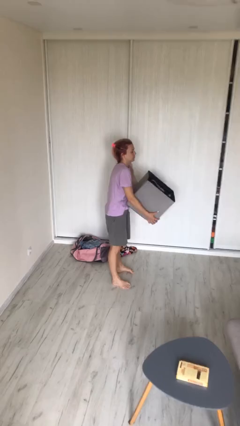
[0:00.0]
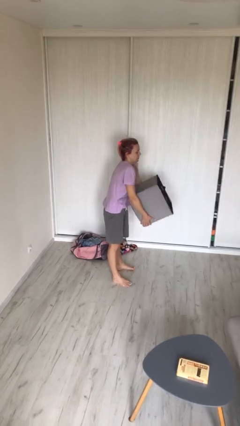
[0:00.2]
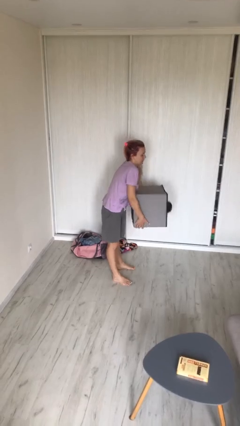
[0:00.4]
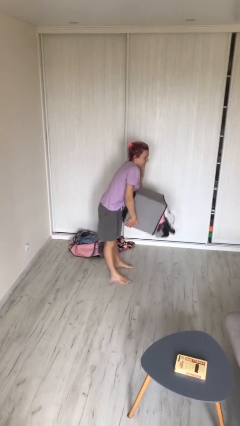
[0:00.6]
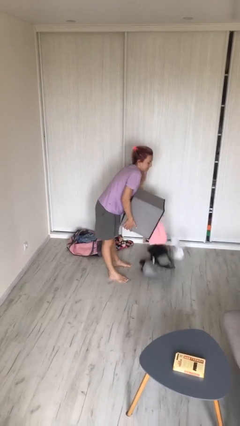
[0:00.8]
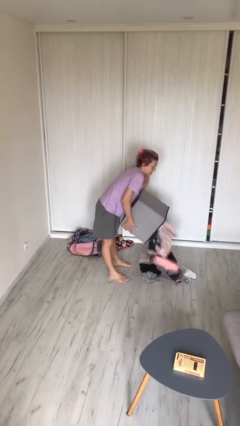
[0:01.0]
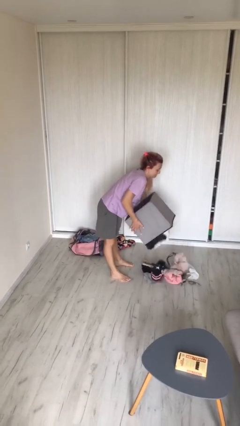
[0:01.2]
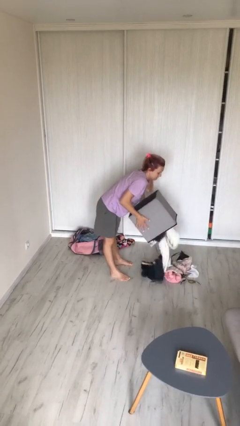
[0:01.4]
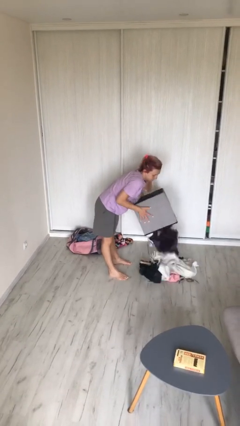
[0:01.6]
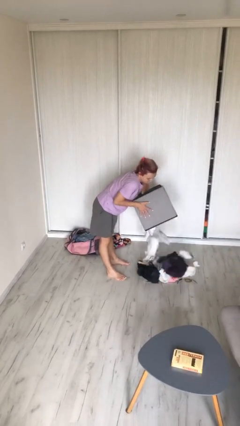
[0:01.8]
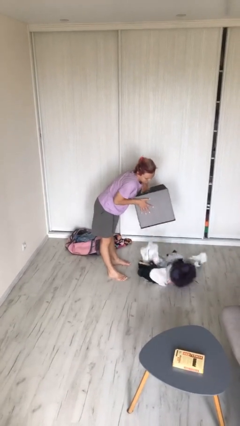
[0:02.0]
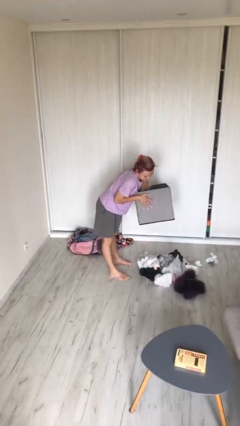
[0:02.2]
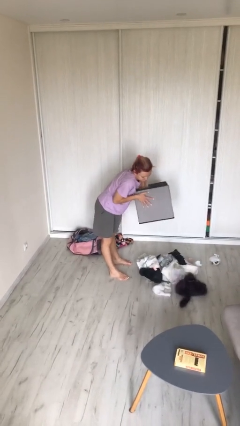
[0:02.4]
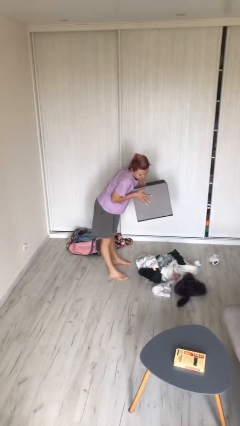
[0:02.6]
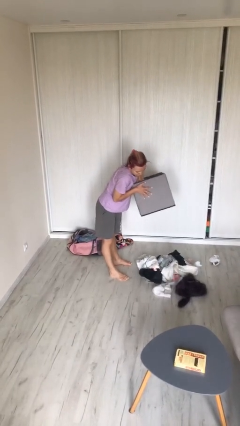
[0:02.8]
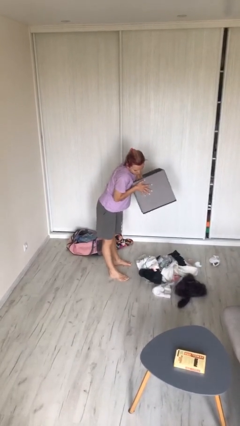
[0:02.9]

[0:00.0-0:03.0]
person unloads box onto floor

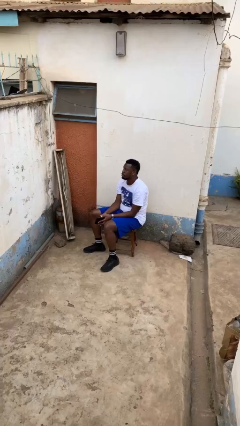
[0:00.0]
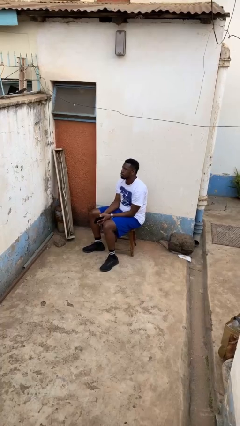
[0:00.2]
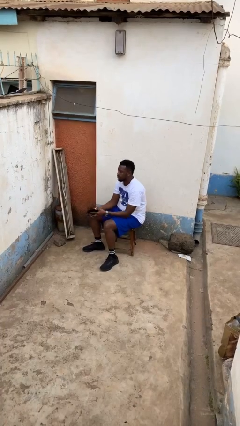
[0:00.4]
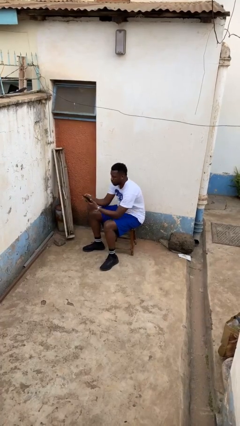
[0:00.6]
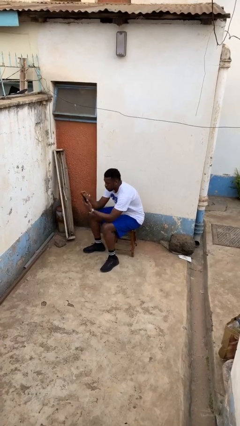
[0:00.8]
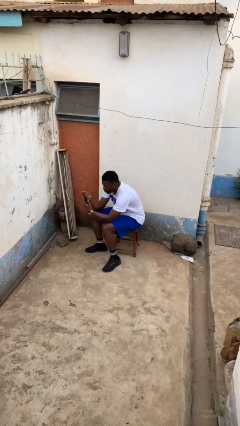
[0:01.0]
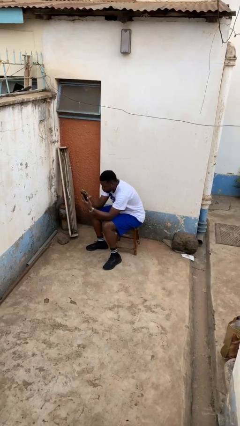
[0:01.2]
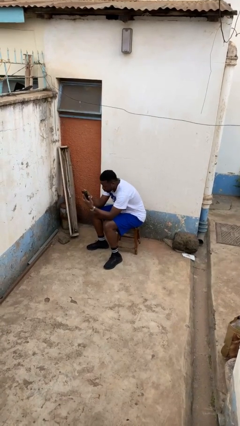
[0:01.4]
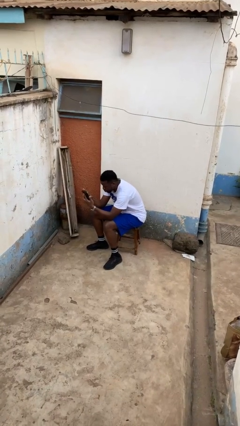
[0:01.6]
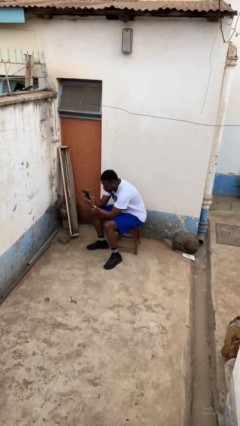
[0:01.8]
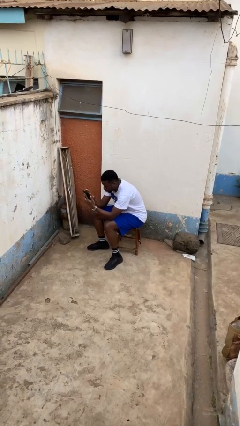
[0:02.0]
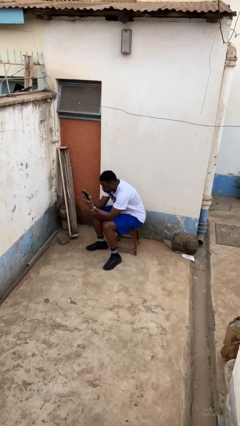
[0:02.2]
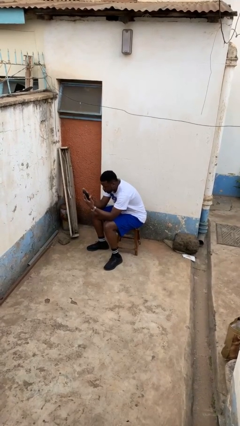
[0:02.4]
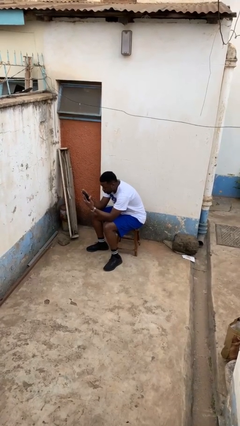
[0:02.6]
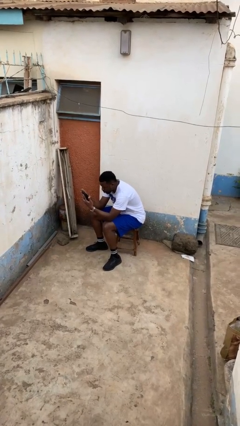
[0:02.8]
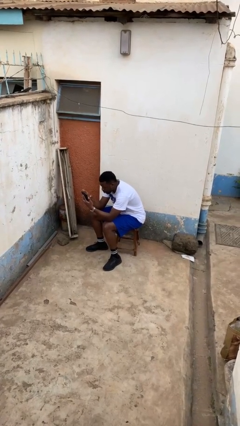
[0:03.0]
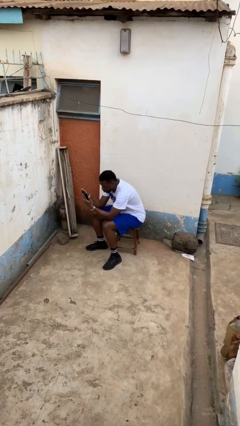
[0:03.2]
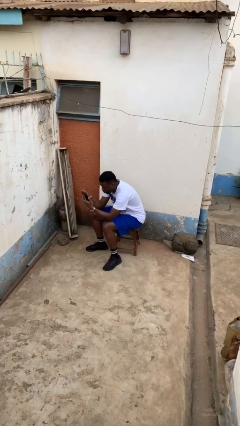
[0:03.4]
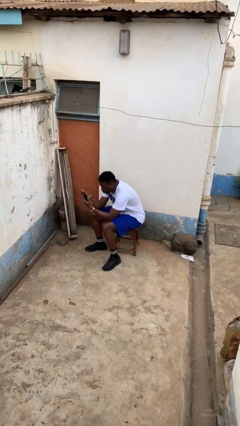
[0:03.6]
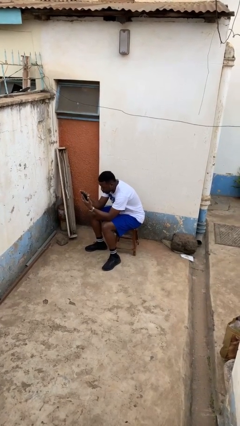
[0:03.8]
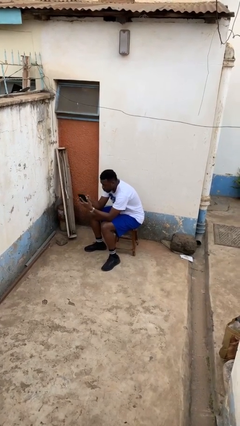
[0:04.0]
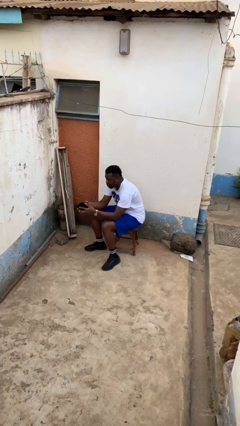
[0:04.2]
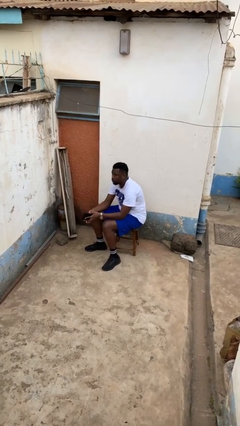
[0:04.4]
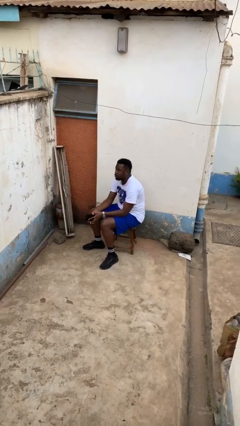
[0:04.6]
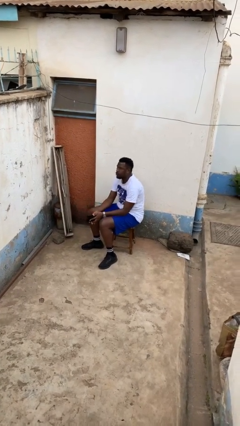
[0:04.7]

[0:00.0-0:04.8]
person interacts with tablet

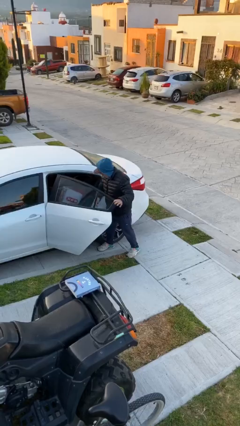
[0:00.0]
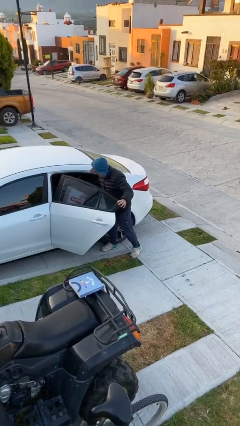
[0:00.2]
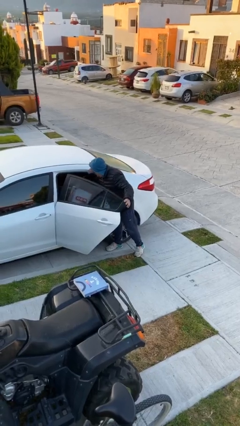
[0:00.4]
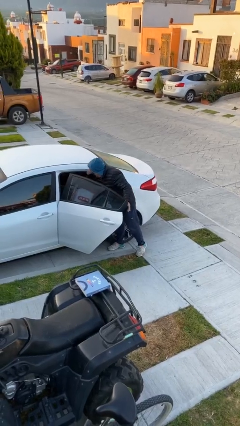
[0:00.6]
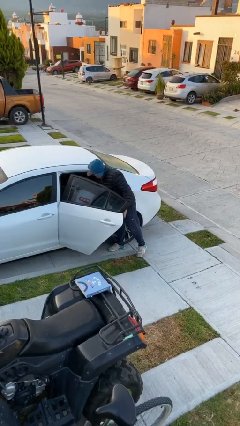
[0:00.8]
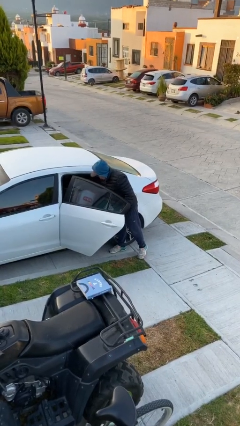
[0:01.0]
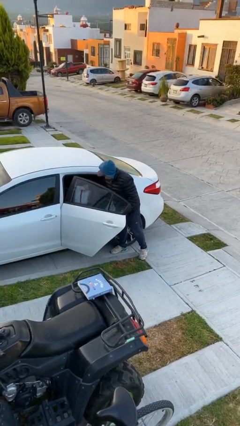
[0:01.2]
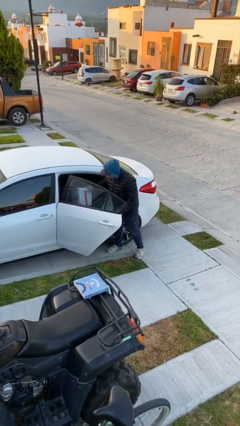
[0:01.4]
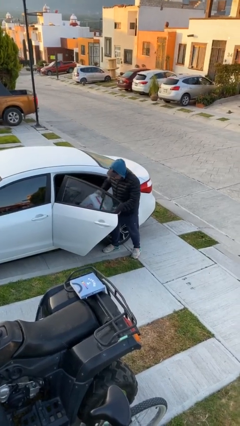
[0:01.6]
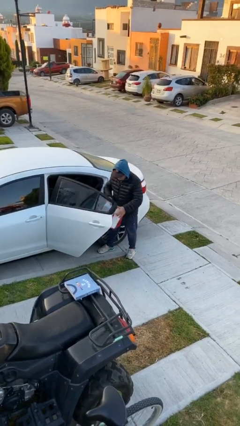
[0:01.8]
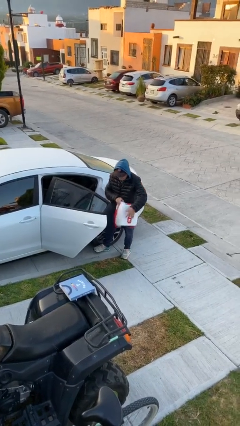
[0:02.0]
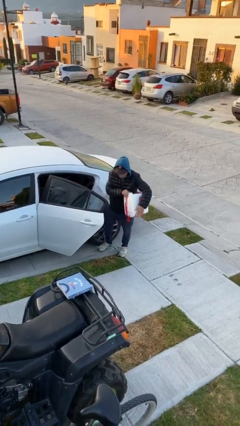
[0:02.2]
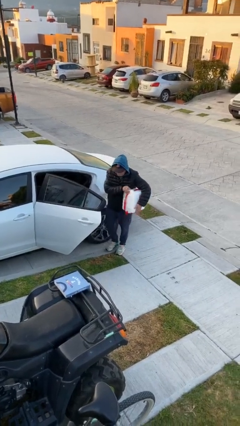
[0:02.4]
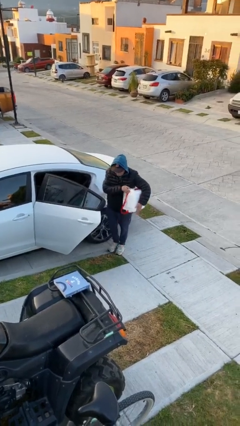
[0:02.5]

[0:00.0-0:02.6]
person unloads car

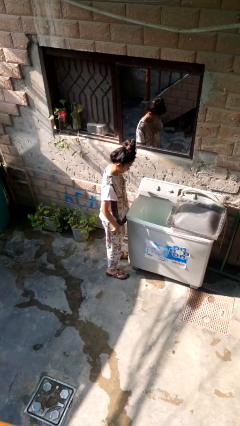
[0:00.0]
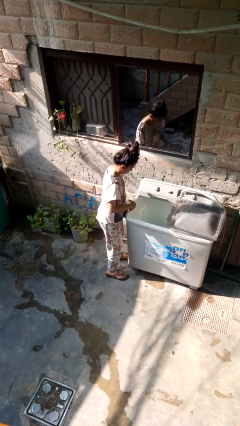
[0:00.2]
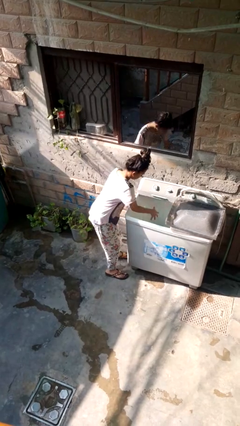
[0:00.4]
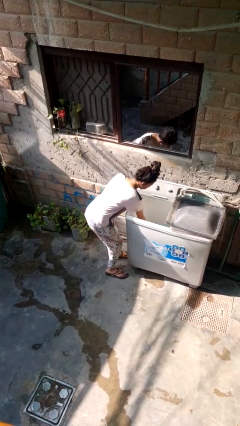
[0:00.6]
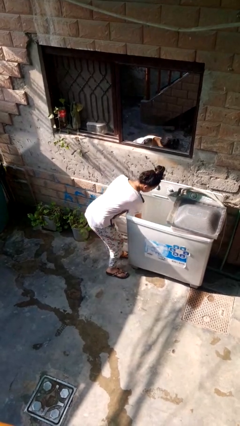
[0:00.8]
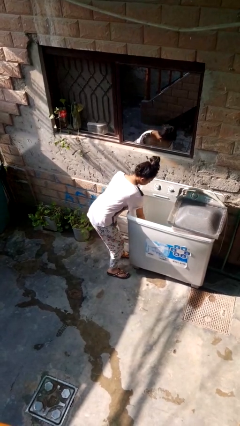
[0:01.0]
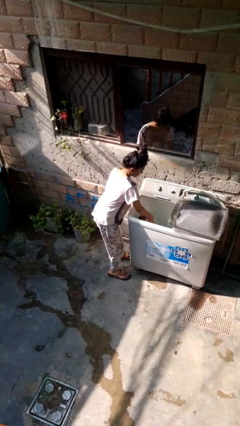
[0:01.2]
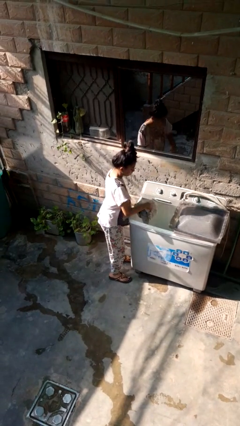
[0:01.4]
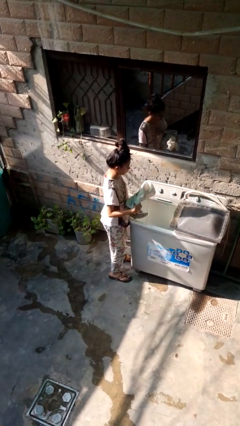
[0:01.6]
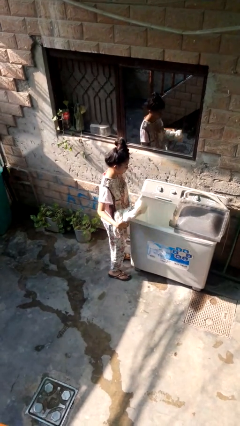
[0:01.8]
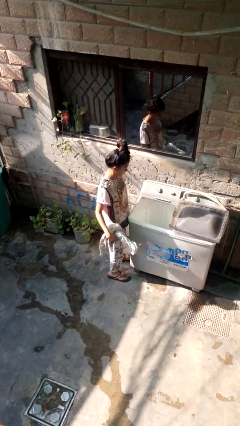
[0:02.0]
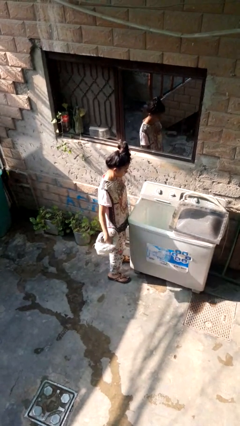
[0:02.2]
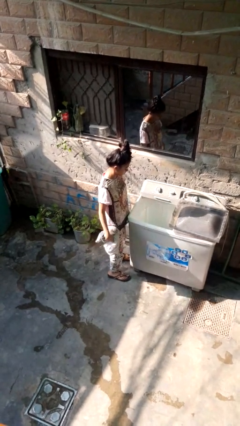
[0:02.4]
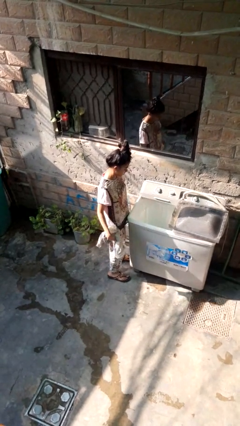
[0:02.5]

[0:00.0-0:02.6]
person unloads clotheswasher

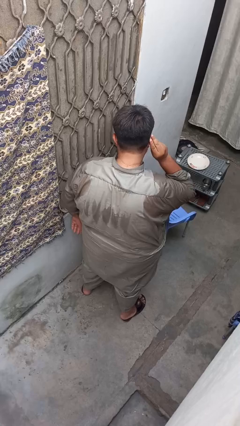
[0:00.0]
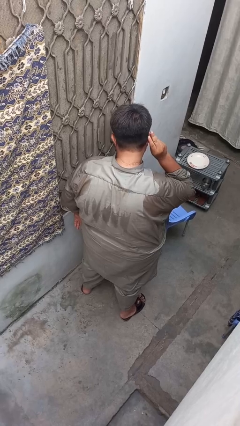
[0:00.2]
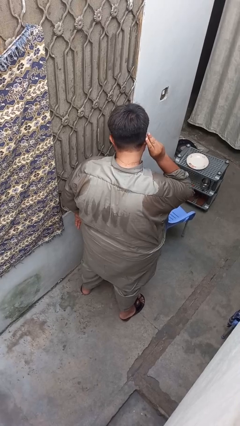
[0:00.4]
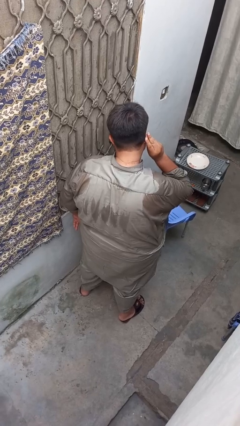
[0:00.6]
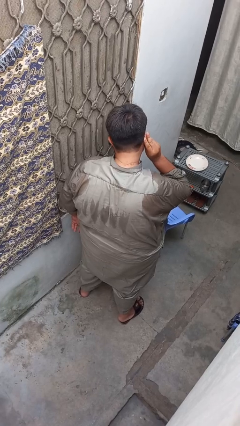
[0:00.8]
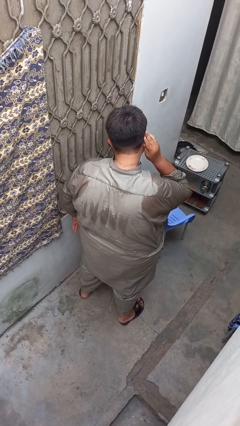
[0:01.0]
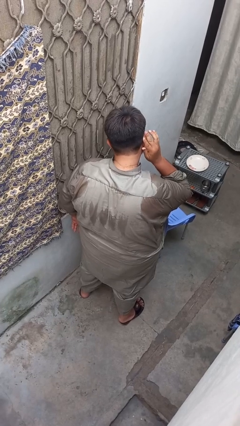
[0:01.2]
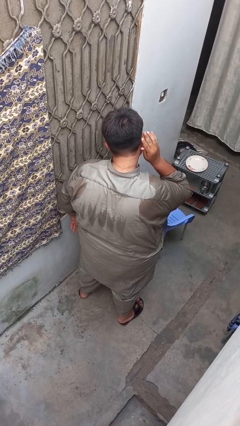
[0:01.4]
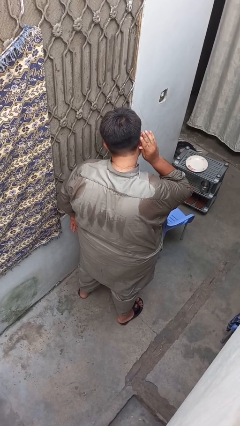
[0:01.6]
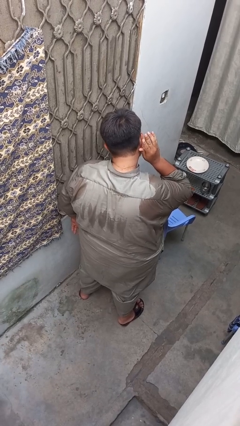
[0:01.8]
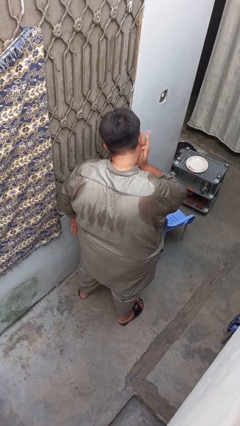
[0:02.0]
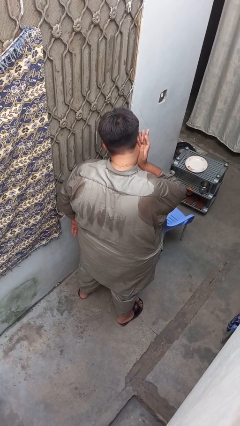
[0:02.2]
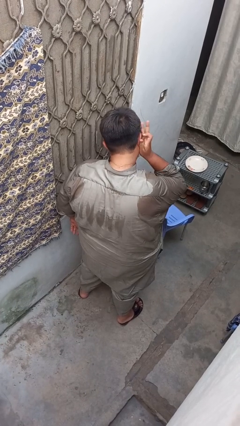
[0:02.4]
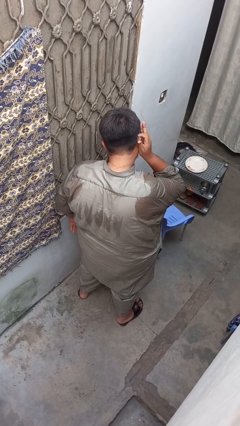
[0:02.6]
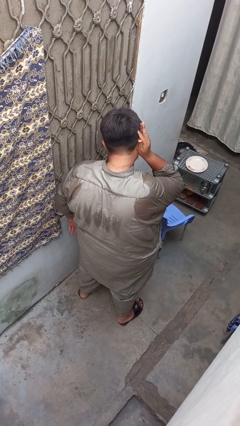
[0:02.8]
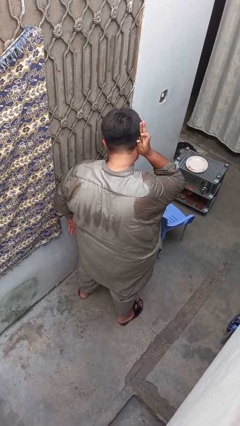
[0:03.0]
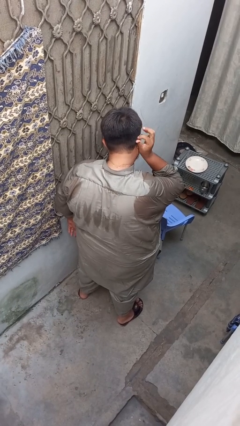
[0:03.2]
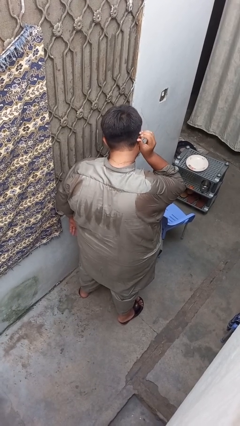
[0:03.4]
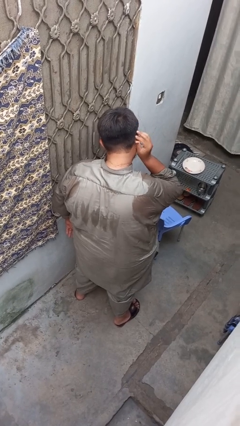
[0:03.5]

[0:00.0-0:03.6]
person puts on earrings

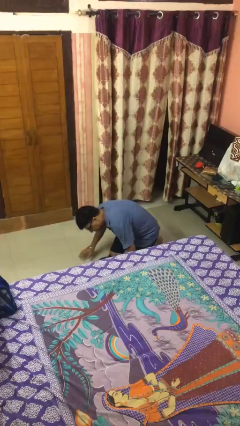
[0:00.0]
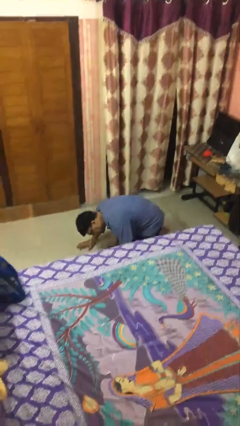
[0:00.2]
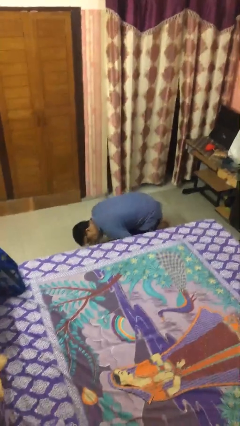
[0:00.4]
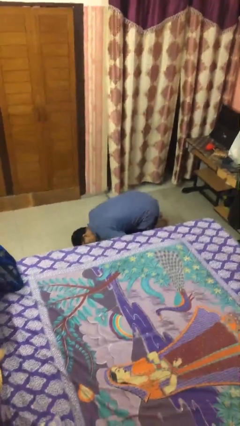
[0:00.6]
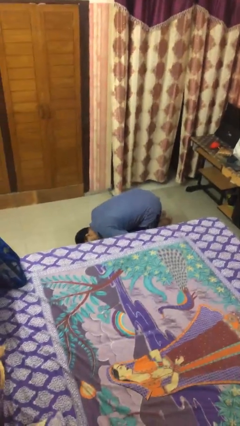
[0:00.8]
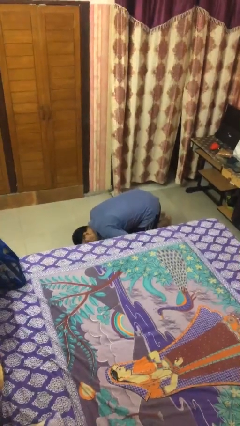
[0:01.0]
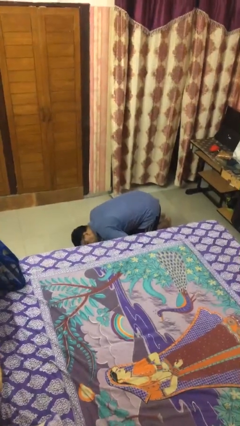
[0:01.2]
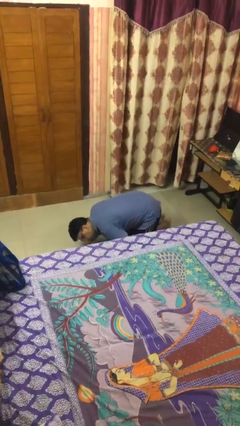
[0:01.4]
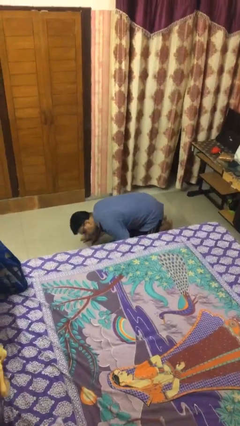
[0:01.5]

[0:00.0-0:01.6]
person searches under bed
